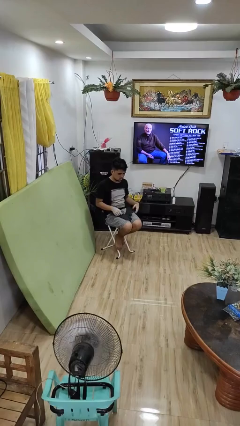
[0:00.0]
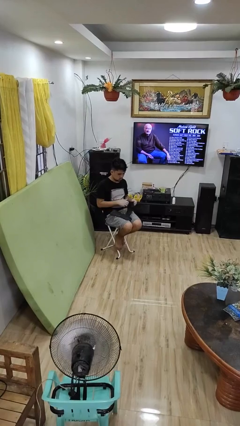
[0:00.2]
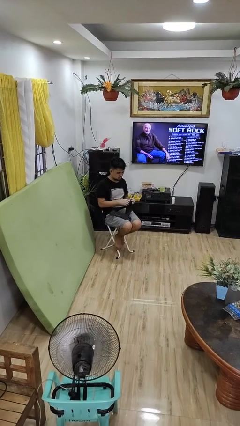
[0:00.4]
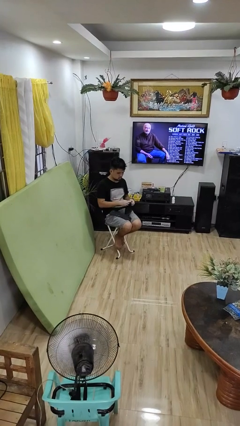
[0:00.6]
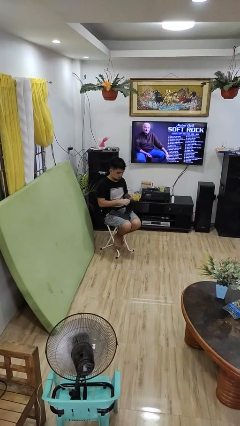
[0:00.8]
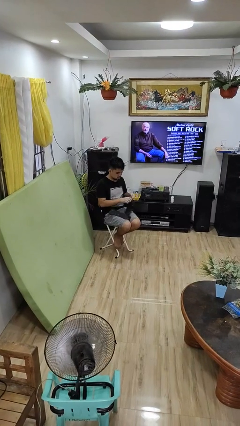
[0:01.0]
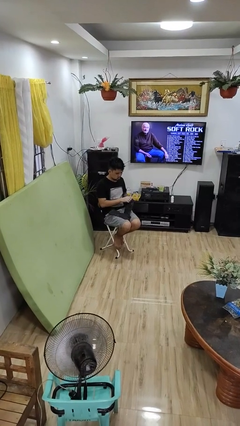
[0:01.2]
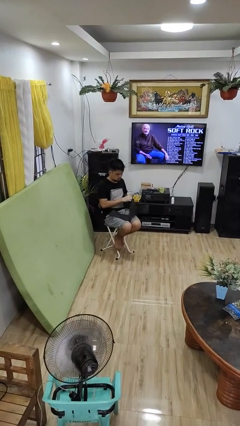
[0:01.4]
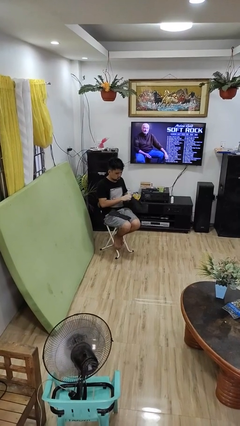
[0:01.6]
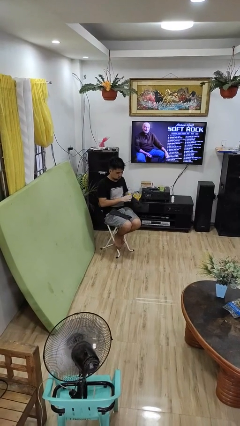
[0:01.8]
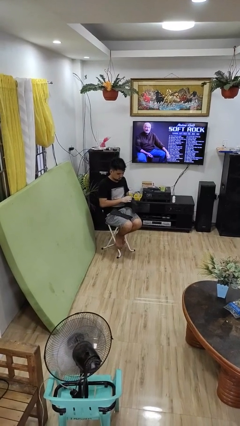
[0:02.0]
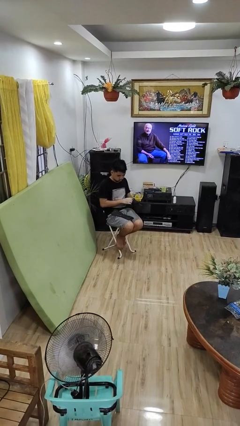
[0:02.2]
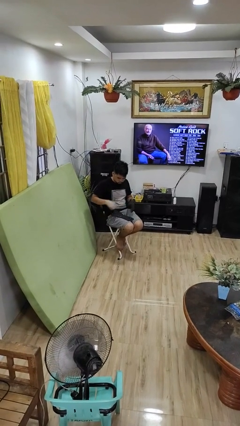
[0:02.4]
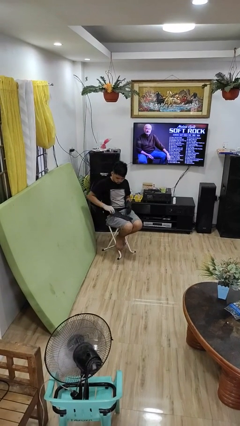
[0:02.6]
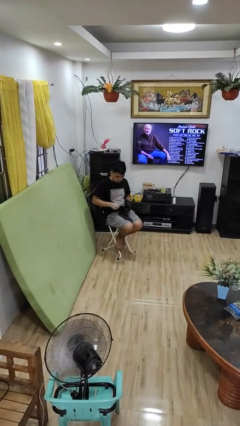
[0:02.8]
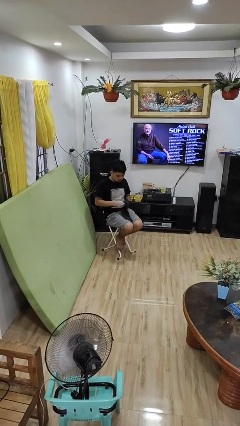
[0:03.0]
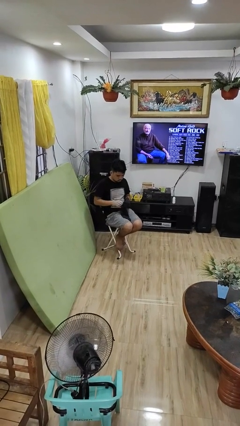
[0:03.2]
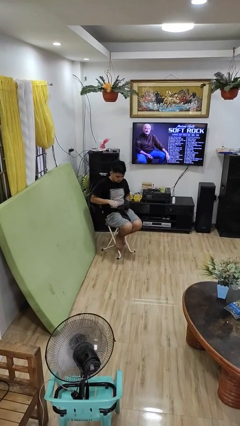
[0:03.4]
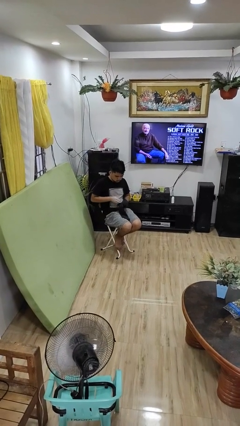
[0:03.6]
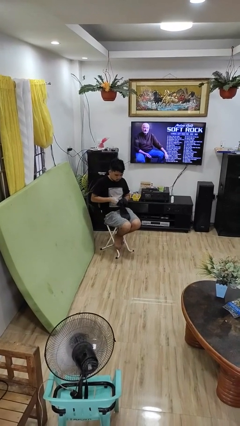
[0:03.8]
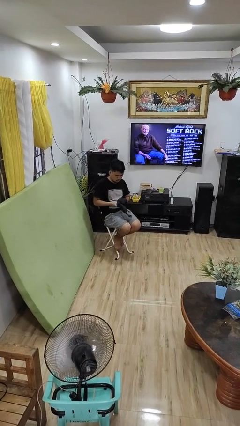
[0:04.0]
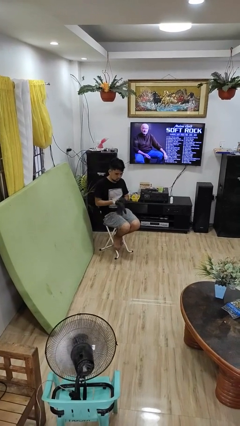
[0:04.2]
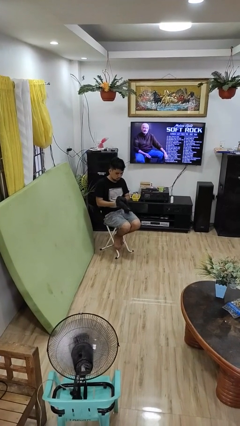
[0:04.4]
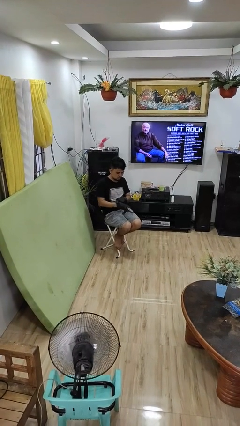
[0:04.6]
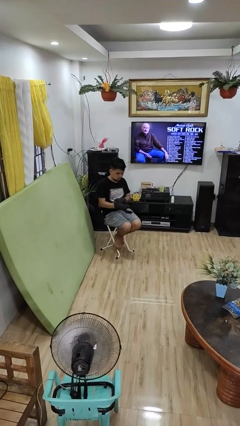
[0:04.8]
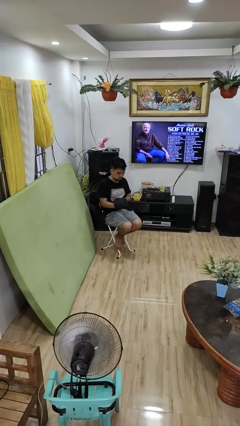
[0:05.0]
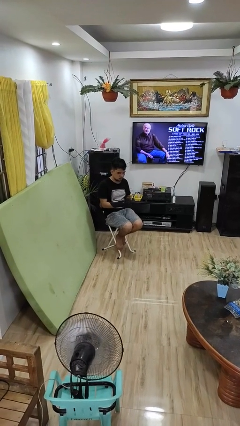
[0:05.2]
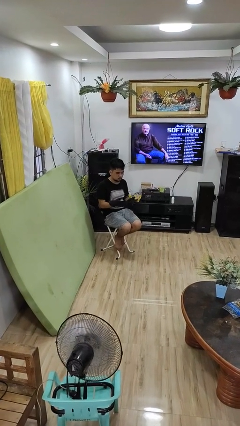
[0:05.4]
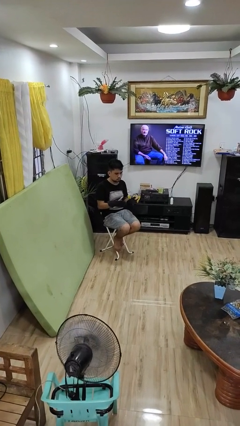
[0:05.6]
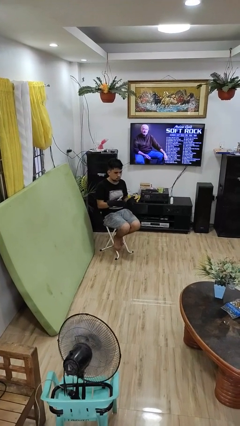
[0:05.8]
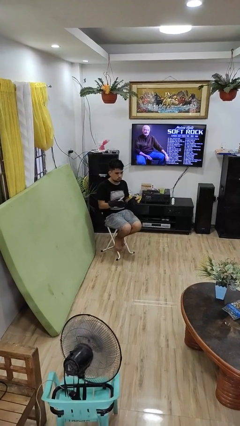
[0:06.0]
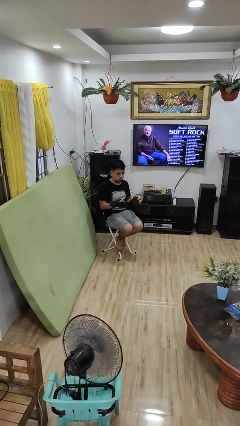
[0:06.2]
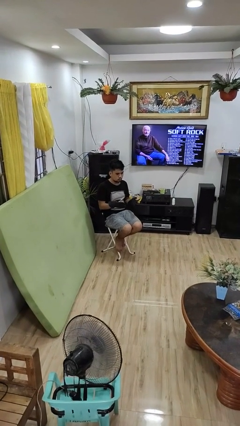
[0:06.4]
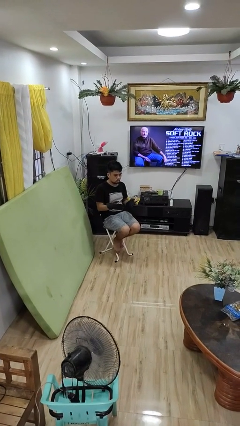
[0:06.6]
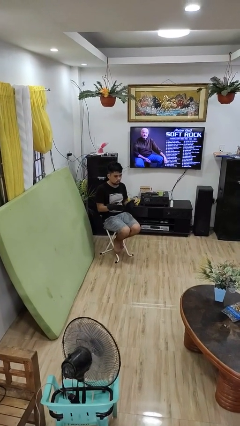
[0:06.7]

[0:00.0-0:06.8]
person puts on gloves

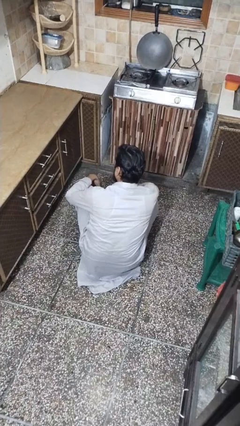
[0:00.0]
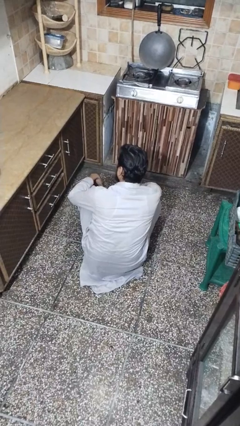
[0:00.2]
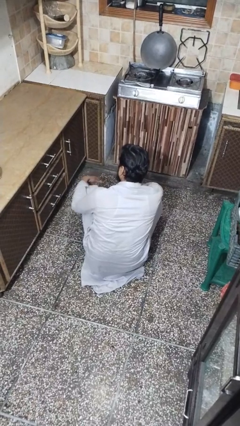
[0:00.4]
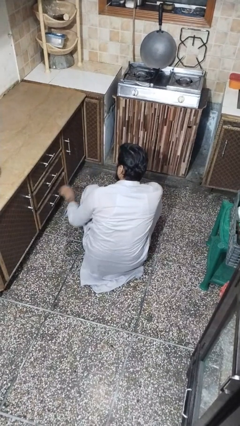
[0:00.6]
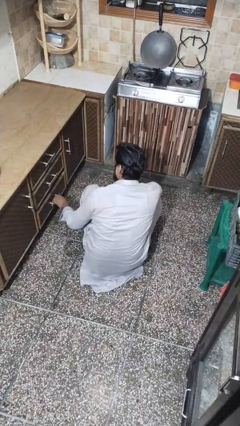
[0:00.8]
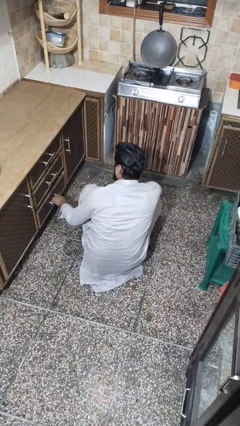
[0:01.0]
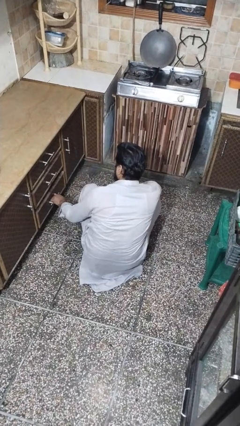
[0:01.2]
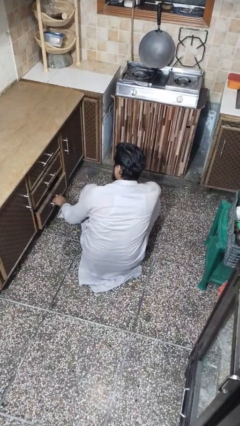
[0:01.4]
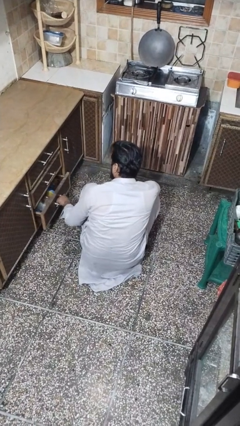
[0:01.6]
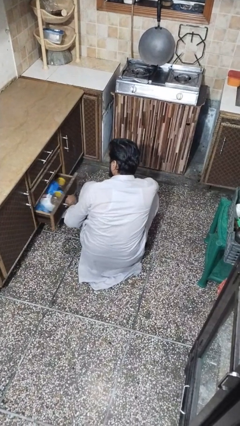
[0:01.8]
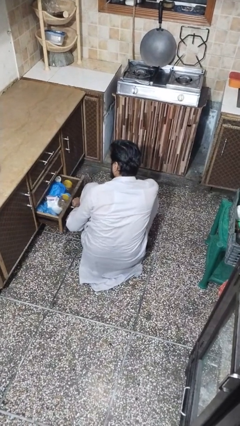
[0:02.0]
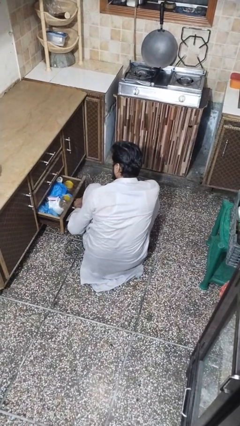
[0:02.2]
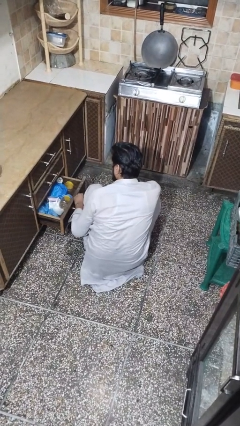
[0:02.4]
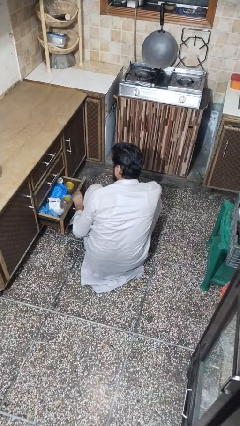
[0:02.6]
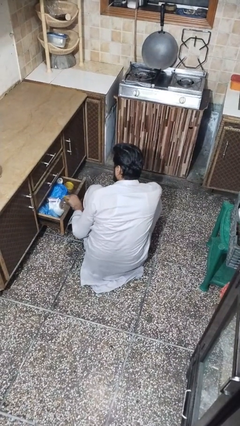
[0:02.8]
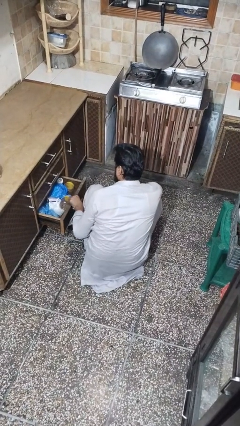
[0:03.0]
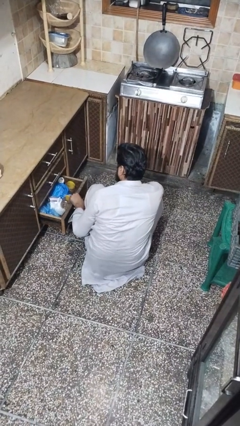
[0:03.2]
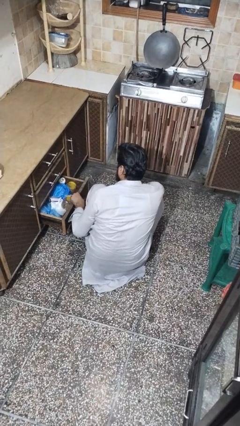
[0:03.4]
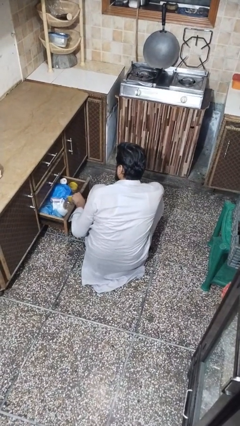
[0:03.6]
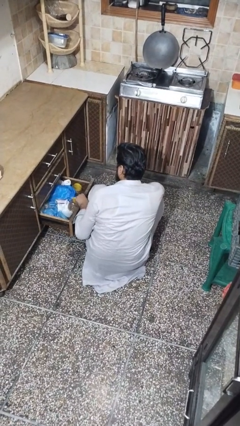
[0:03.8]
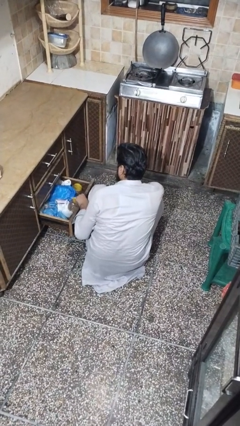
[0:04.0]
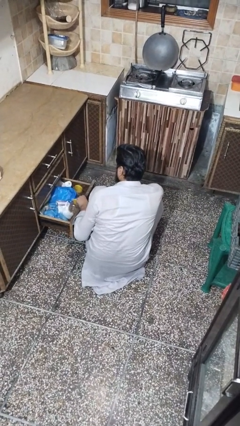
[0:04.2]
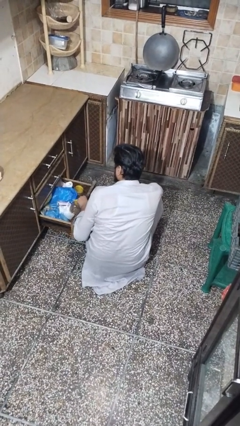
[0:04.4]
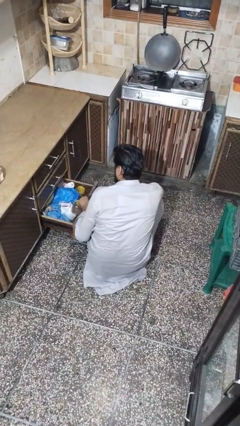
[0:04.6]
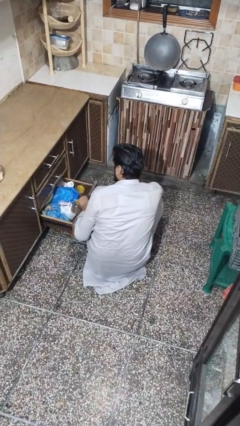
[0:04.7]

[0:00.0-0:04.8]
person opens kitchen drawer

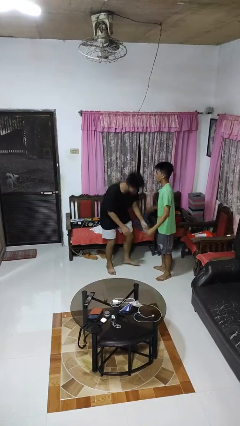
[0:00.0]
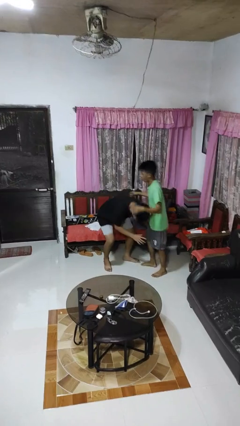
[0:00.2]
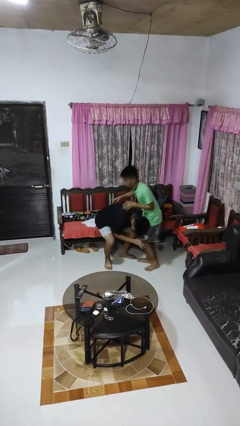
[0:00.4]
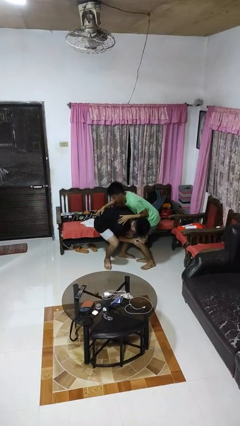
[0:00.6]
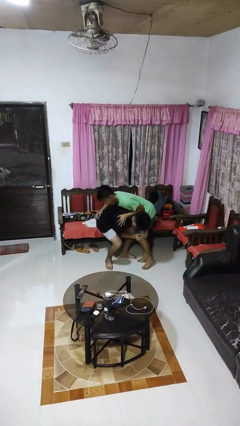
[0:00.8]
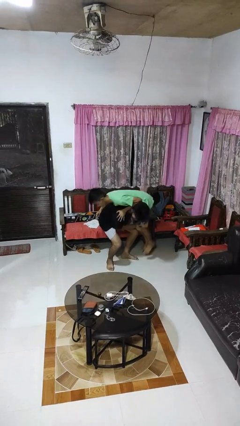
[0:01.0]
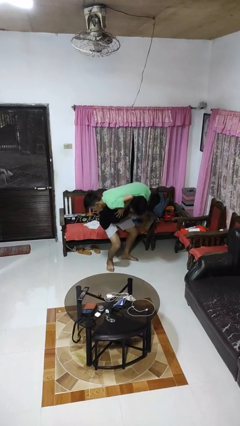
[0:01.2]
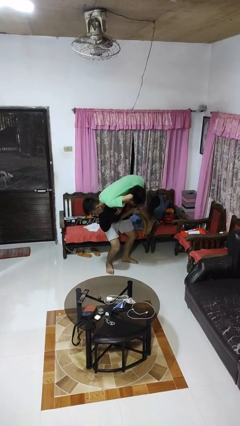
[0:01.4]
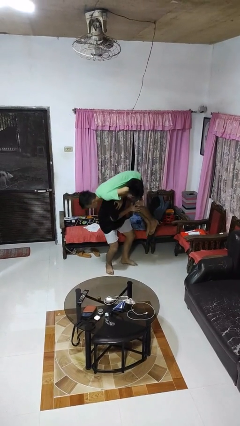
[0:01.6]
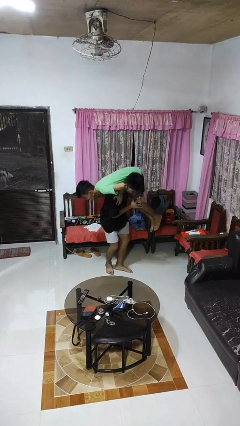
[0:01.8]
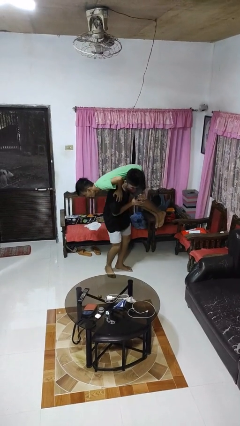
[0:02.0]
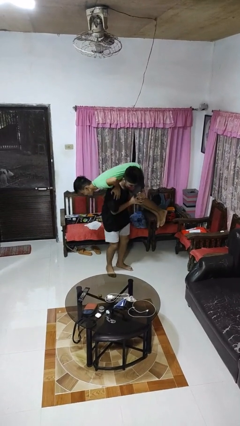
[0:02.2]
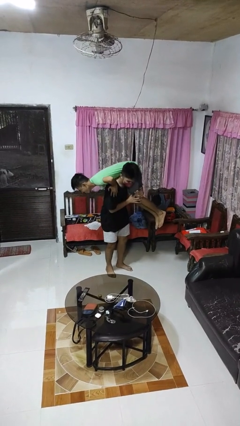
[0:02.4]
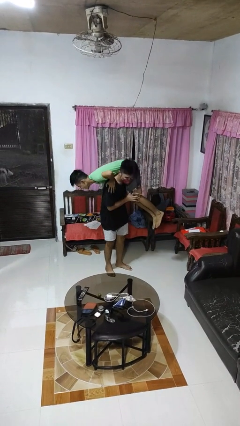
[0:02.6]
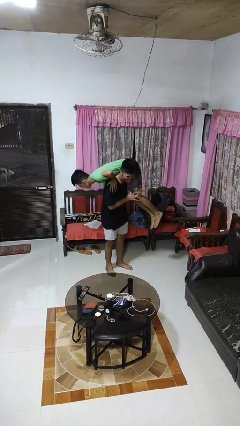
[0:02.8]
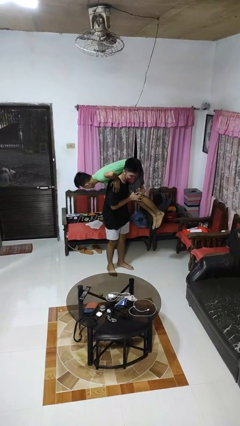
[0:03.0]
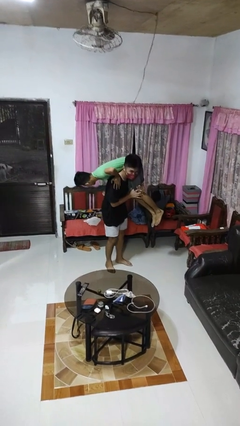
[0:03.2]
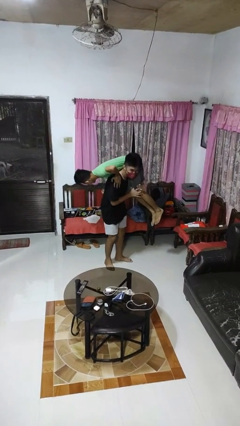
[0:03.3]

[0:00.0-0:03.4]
person carries person over shoulder

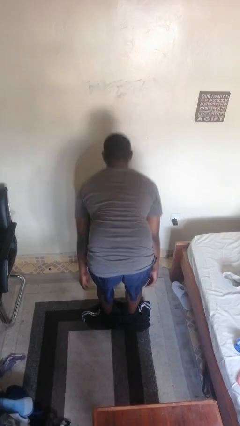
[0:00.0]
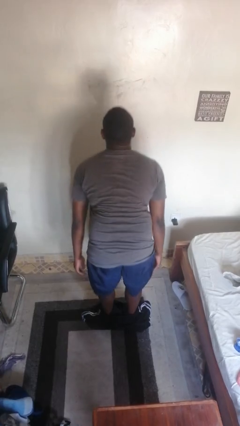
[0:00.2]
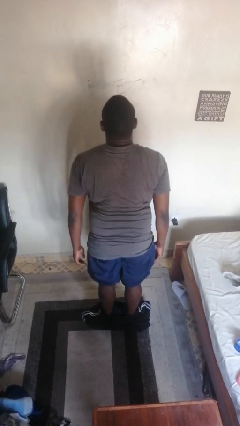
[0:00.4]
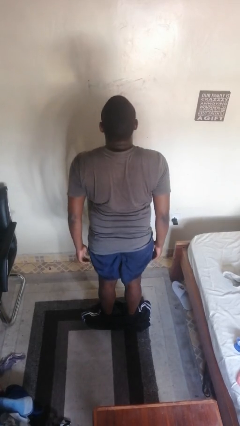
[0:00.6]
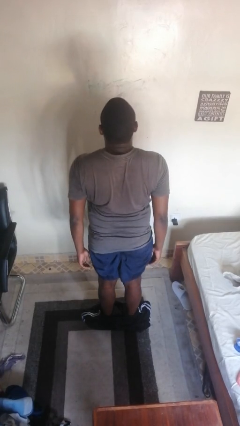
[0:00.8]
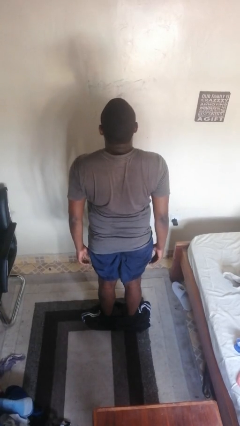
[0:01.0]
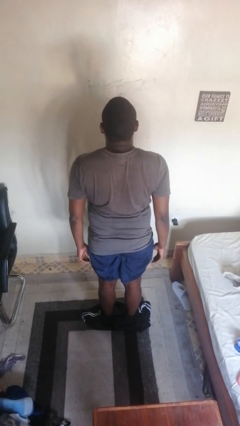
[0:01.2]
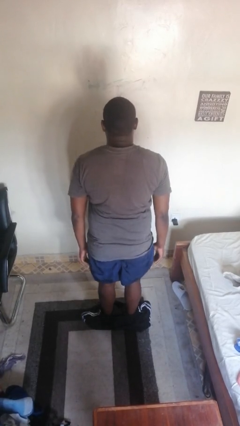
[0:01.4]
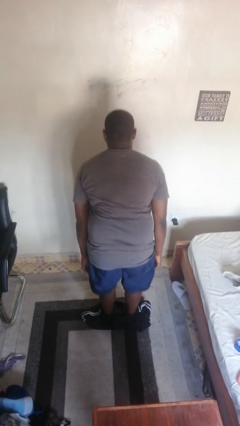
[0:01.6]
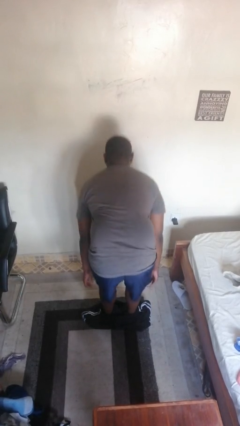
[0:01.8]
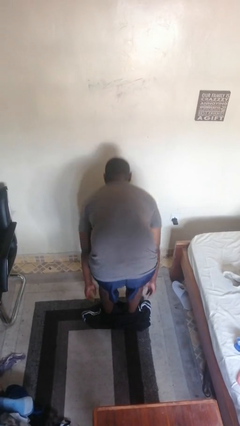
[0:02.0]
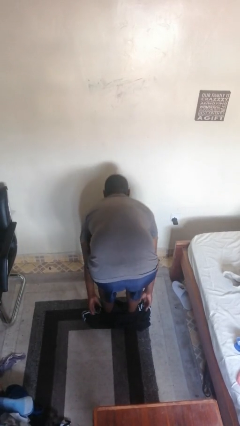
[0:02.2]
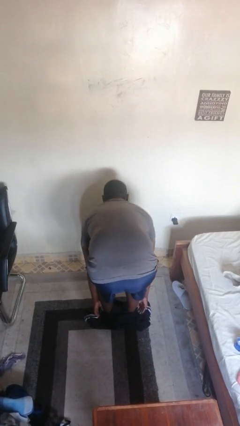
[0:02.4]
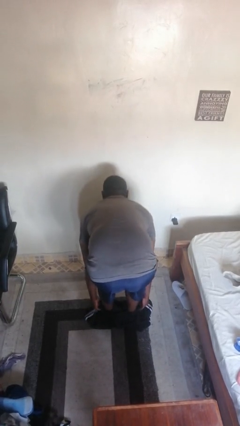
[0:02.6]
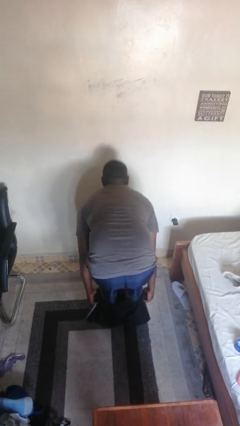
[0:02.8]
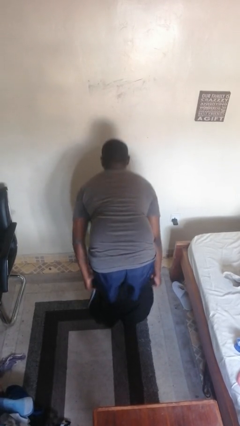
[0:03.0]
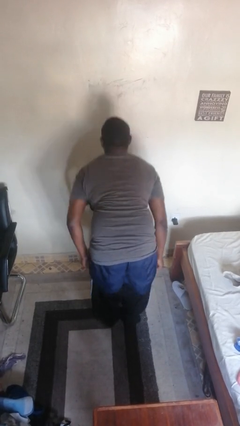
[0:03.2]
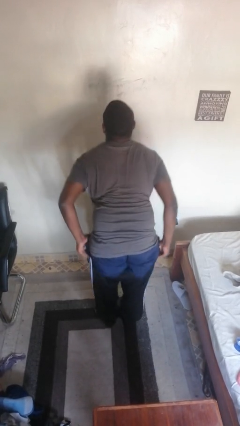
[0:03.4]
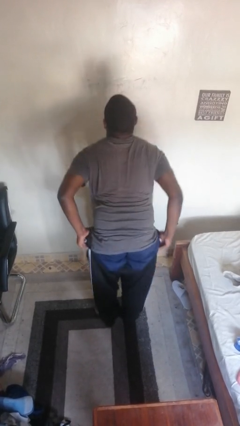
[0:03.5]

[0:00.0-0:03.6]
person puts on pants
